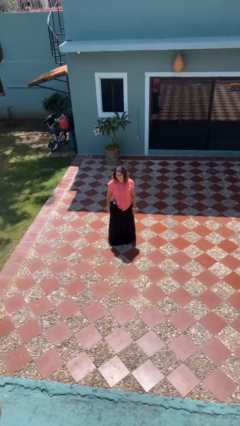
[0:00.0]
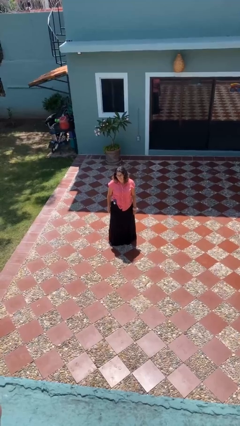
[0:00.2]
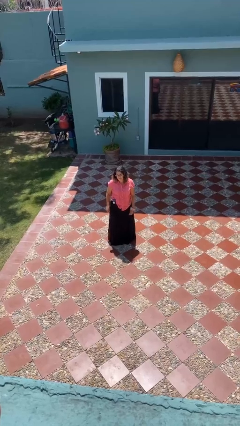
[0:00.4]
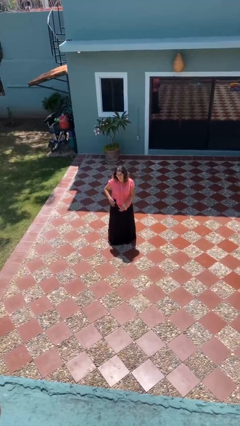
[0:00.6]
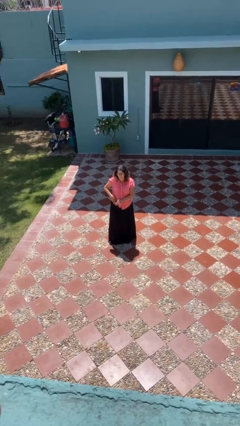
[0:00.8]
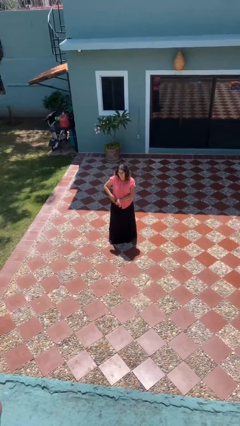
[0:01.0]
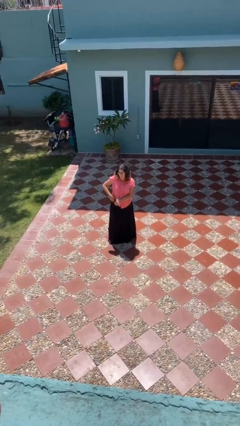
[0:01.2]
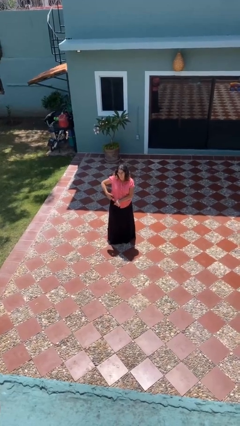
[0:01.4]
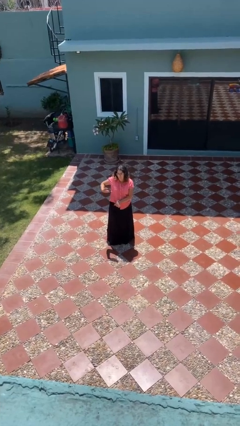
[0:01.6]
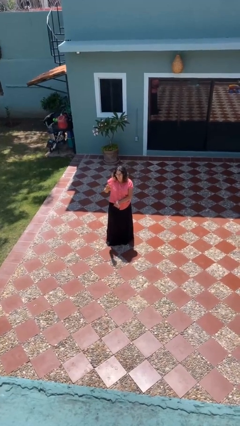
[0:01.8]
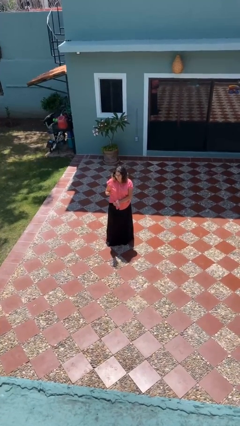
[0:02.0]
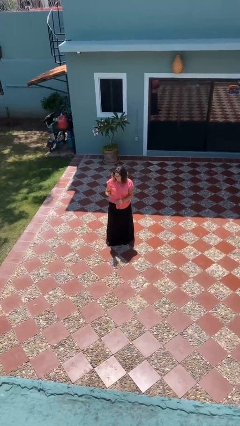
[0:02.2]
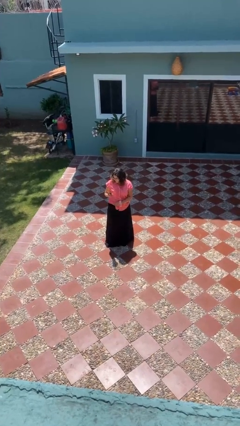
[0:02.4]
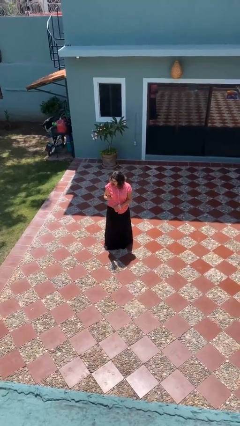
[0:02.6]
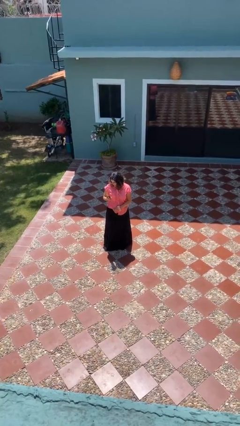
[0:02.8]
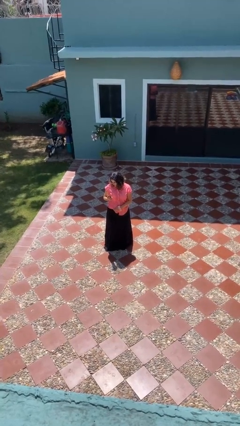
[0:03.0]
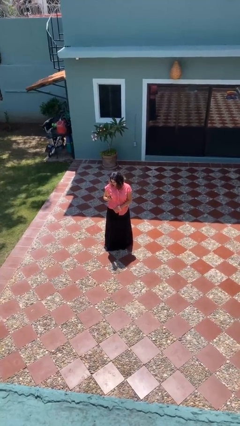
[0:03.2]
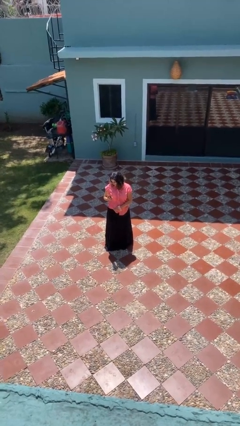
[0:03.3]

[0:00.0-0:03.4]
person takes phone from pocket

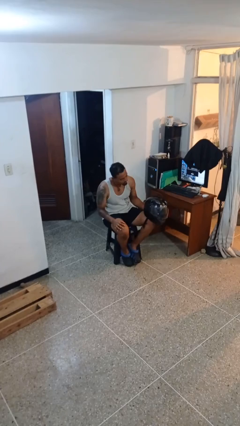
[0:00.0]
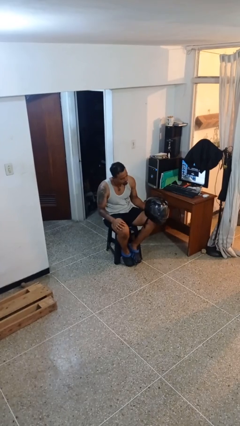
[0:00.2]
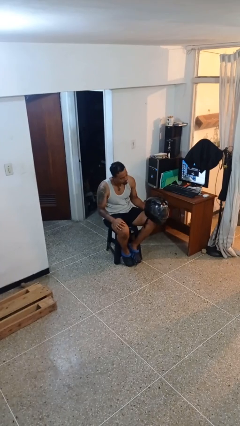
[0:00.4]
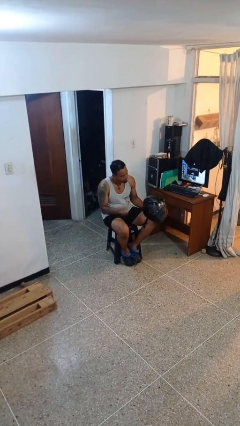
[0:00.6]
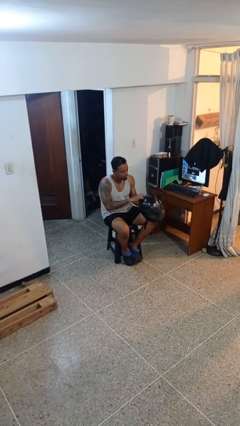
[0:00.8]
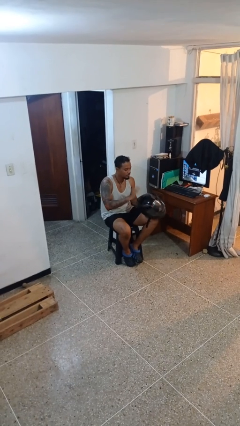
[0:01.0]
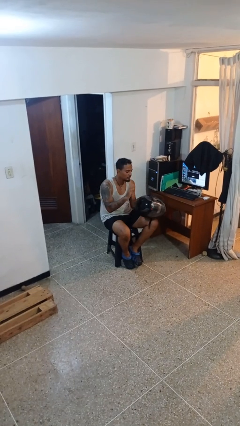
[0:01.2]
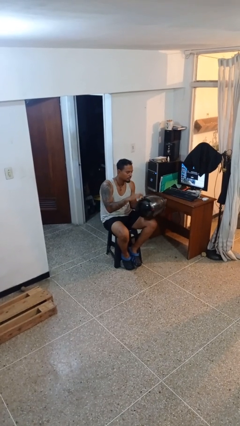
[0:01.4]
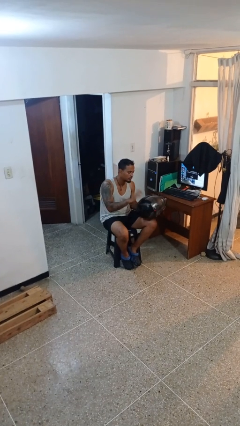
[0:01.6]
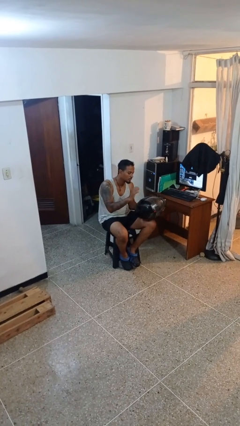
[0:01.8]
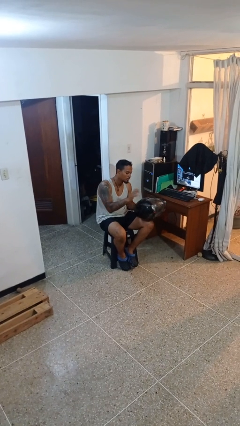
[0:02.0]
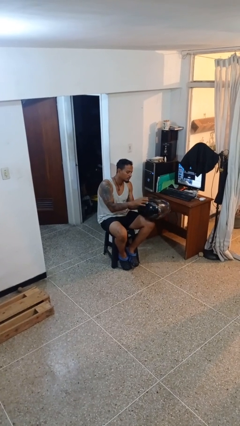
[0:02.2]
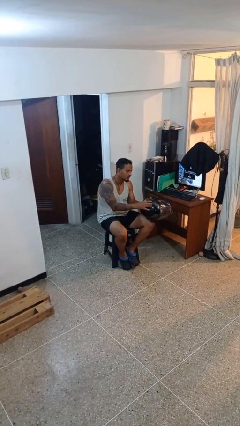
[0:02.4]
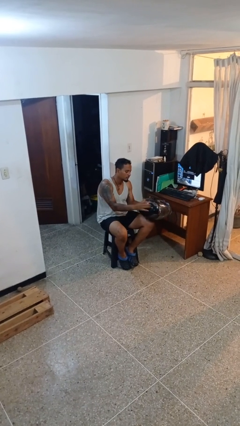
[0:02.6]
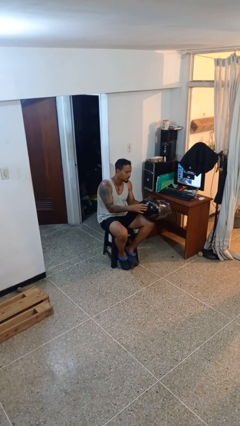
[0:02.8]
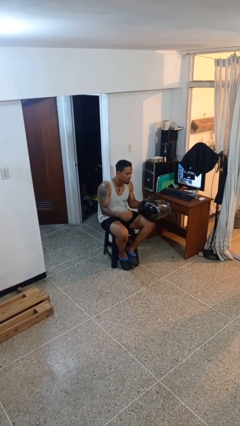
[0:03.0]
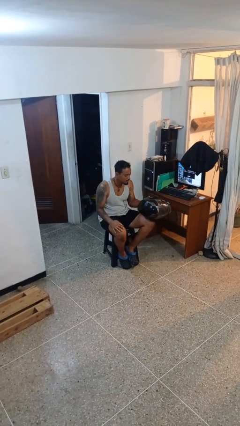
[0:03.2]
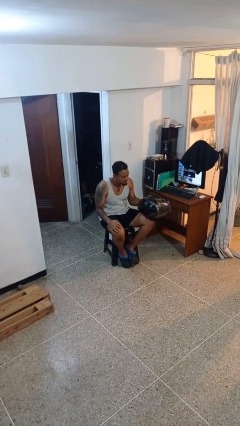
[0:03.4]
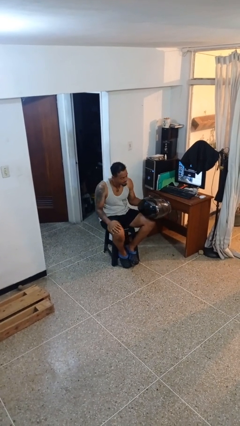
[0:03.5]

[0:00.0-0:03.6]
person taps object with finger

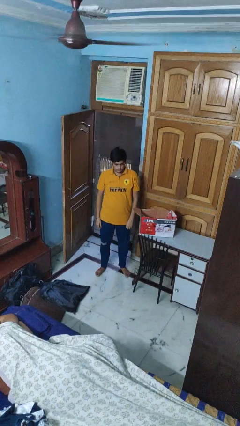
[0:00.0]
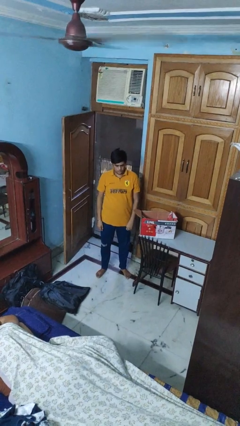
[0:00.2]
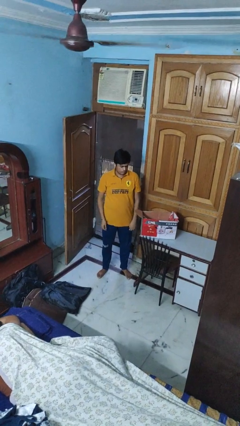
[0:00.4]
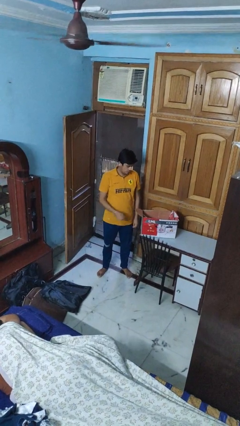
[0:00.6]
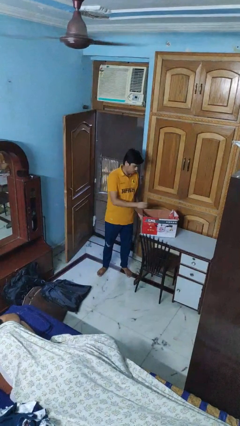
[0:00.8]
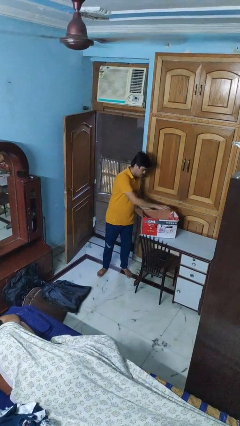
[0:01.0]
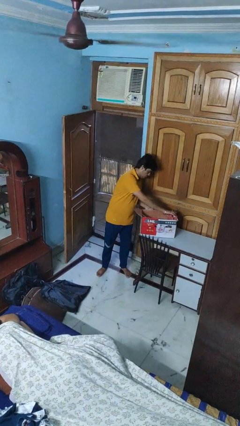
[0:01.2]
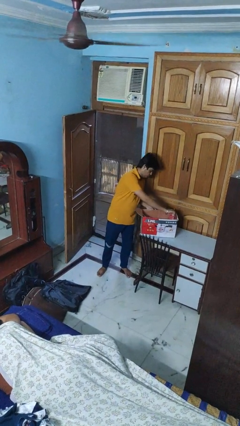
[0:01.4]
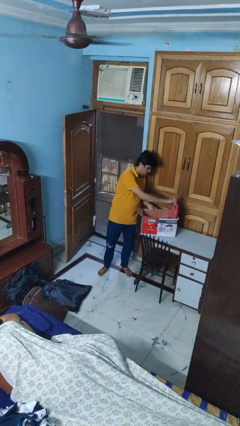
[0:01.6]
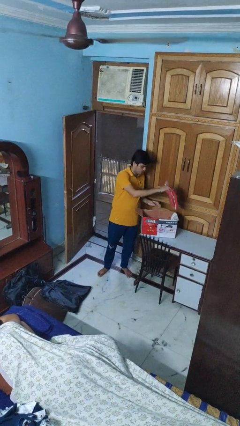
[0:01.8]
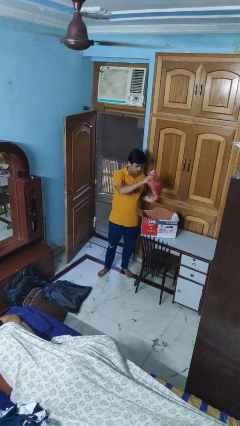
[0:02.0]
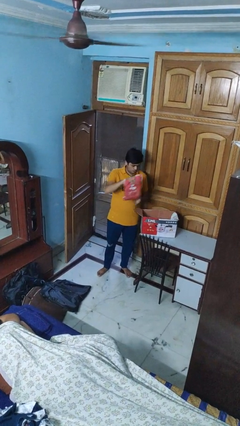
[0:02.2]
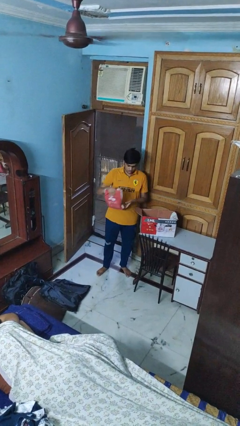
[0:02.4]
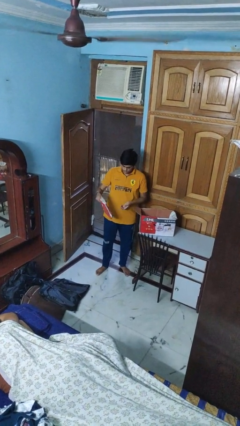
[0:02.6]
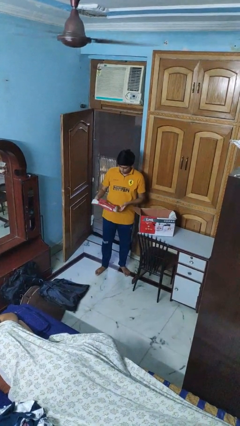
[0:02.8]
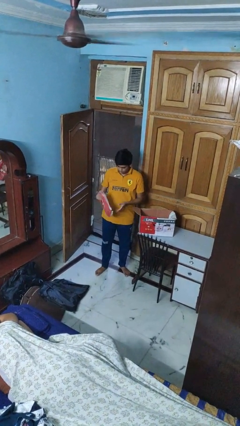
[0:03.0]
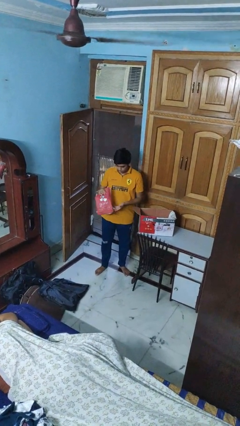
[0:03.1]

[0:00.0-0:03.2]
person takes object from box

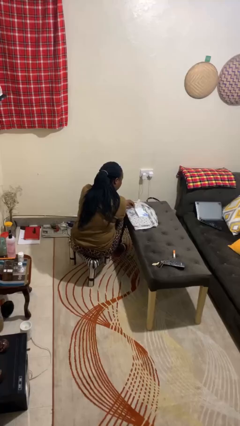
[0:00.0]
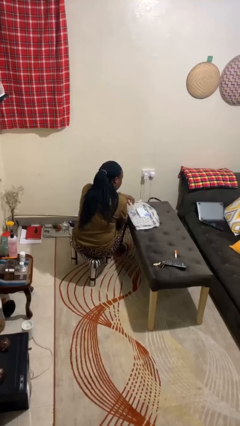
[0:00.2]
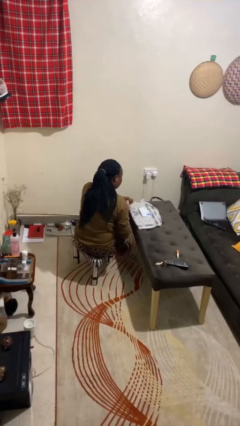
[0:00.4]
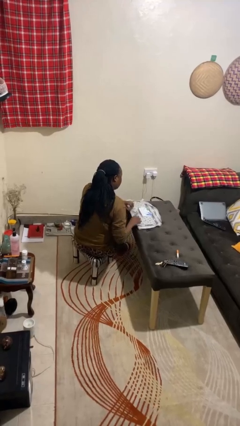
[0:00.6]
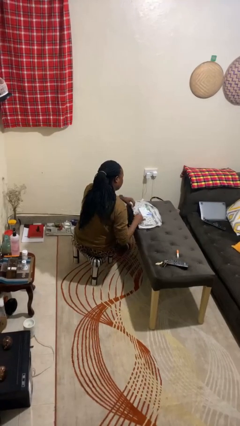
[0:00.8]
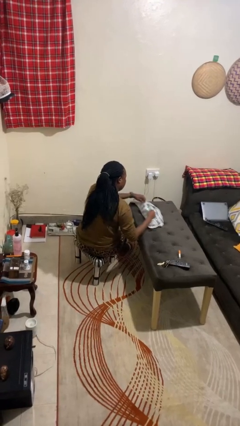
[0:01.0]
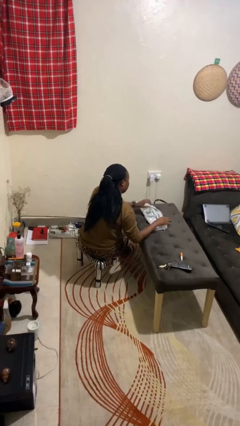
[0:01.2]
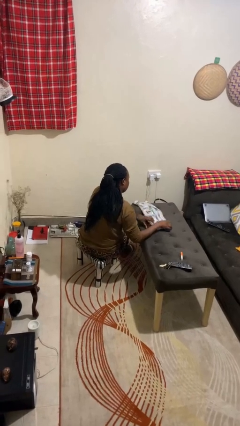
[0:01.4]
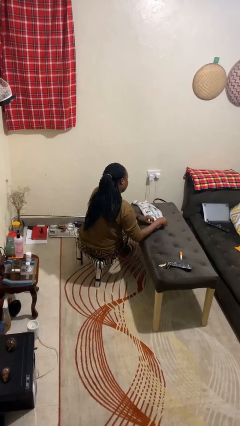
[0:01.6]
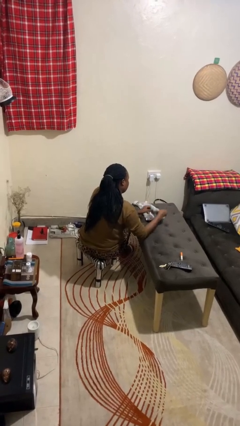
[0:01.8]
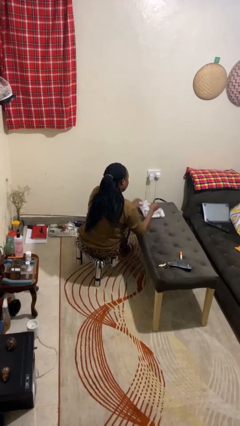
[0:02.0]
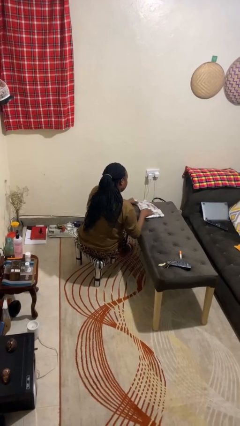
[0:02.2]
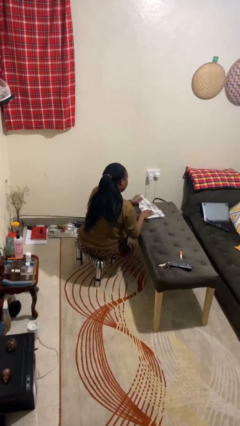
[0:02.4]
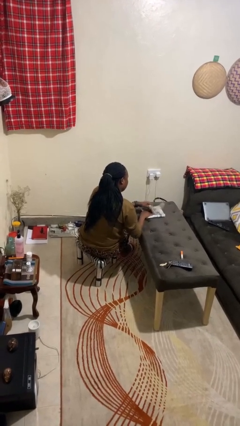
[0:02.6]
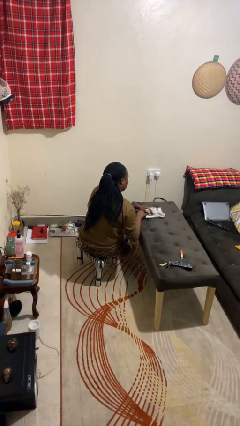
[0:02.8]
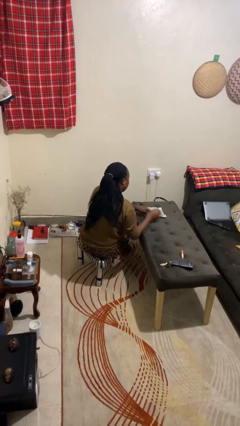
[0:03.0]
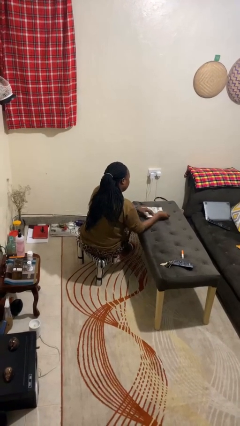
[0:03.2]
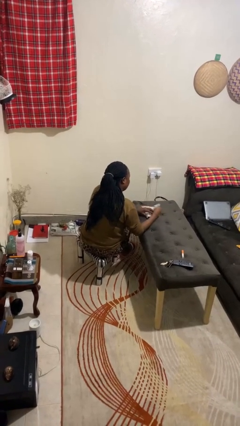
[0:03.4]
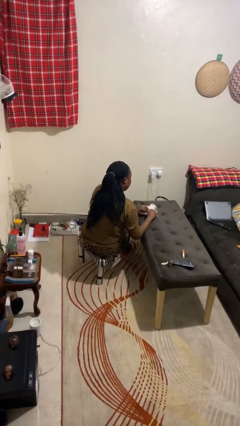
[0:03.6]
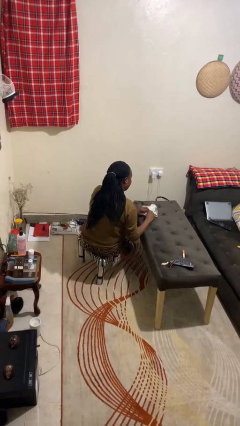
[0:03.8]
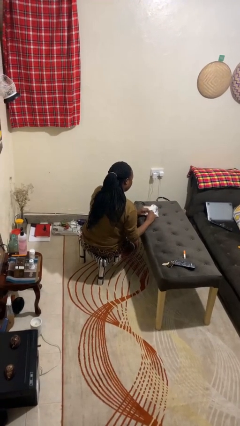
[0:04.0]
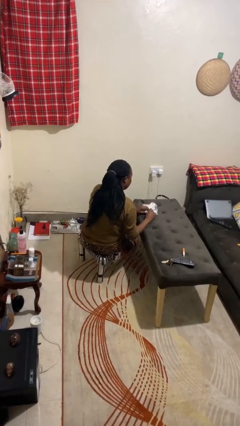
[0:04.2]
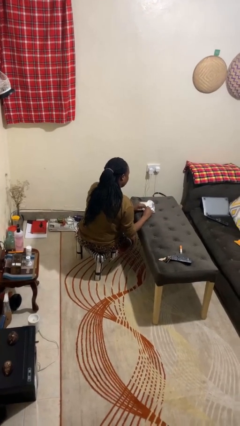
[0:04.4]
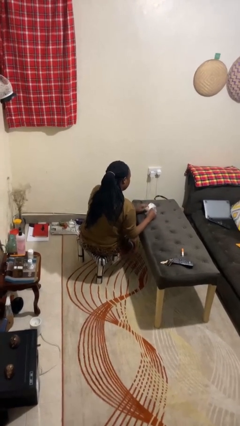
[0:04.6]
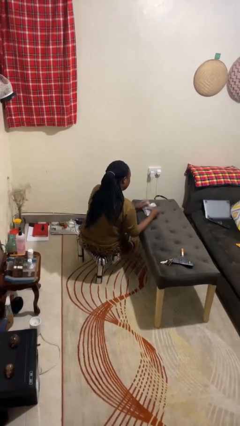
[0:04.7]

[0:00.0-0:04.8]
person wraps box

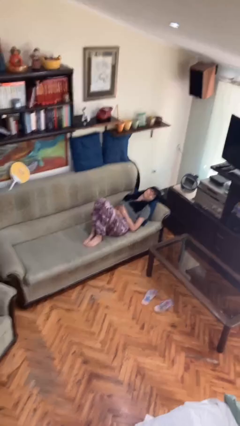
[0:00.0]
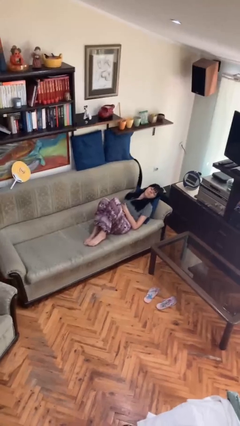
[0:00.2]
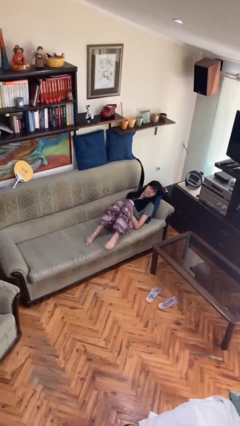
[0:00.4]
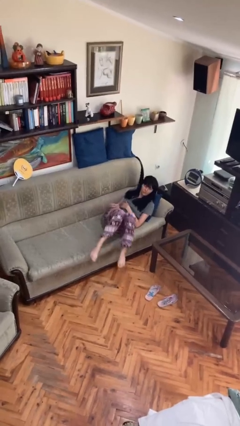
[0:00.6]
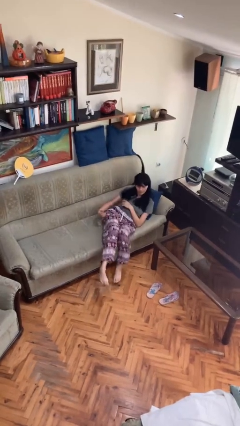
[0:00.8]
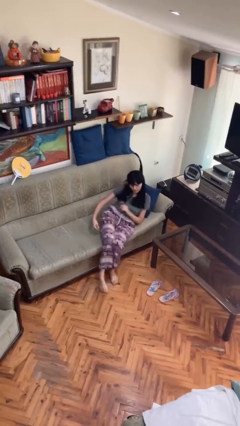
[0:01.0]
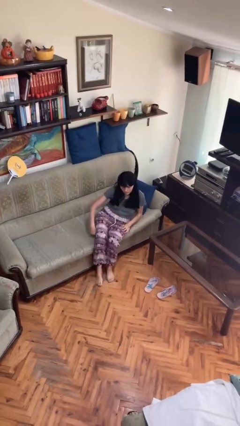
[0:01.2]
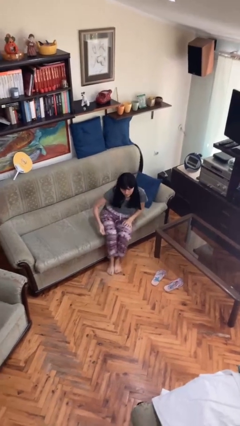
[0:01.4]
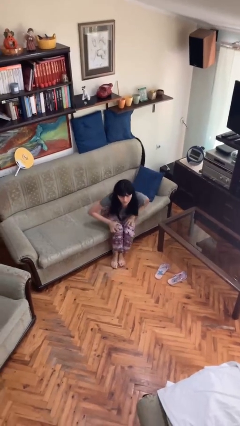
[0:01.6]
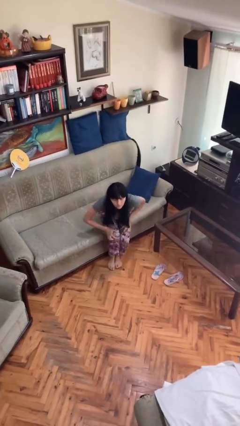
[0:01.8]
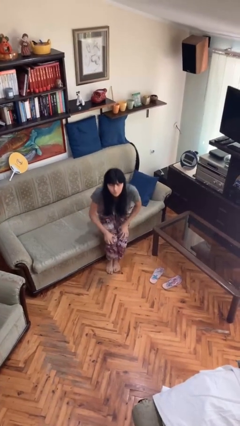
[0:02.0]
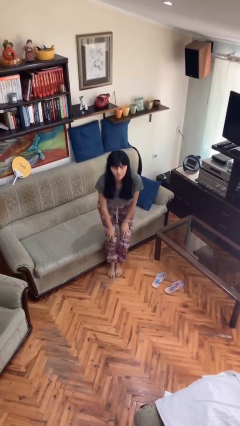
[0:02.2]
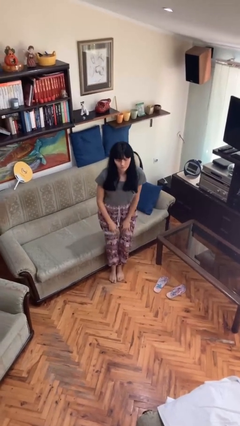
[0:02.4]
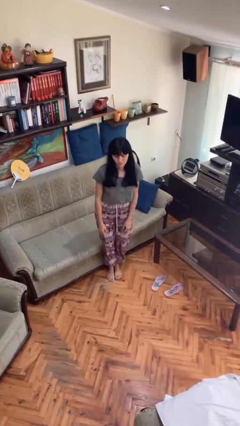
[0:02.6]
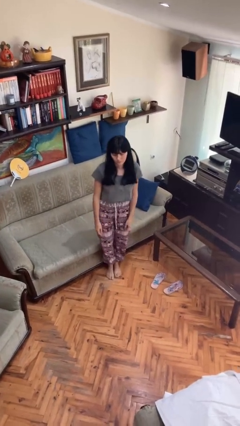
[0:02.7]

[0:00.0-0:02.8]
person stands up
